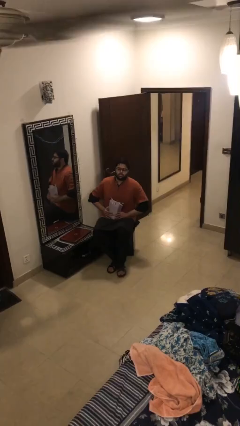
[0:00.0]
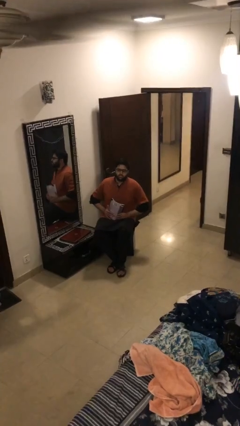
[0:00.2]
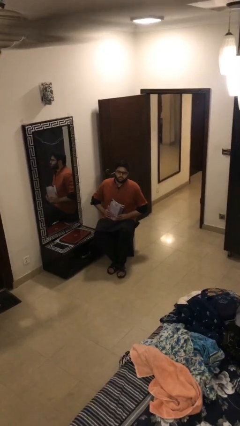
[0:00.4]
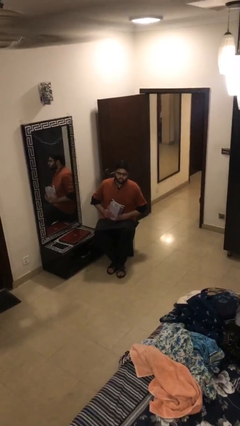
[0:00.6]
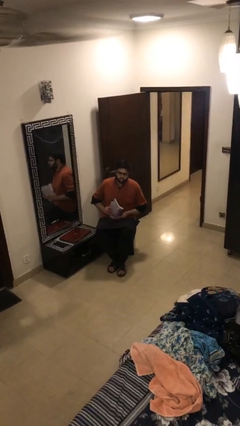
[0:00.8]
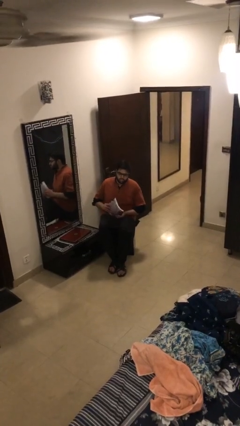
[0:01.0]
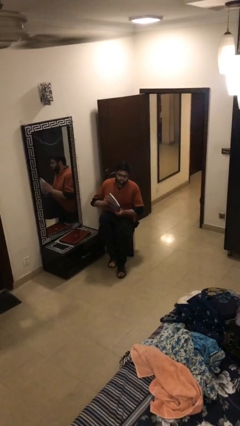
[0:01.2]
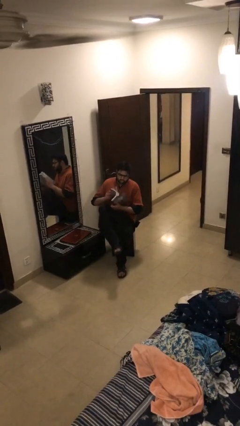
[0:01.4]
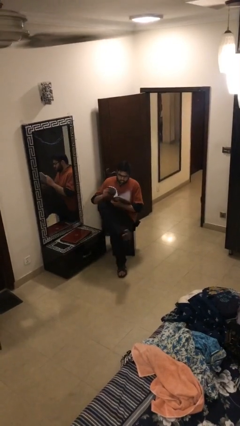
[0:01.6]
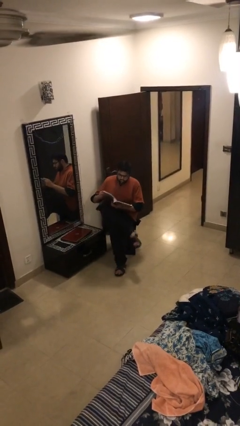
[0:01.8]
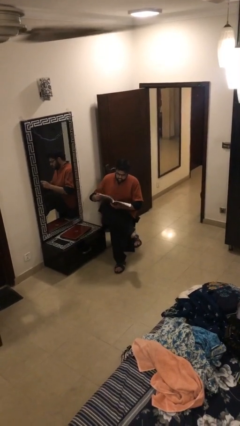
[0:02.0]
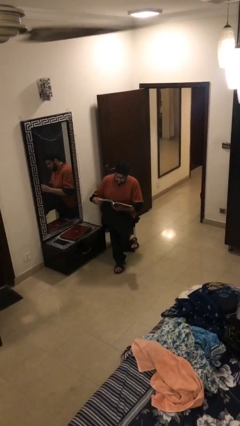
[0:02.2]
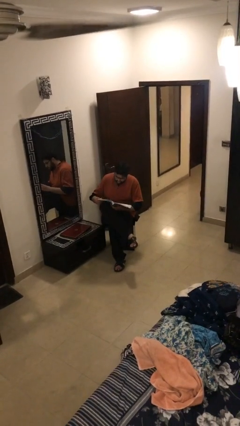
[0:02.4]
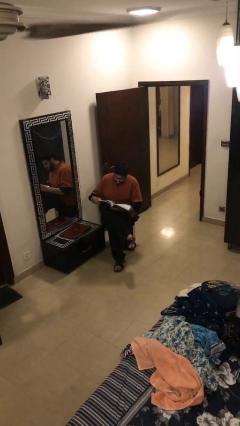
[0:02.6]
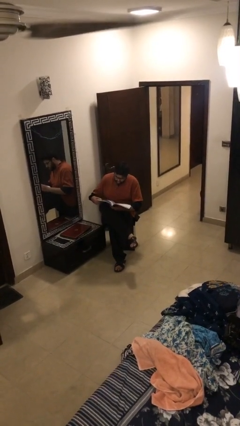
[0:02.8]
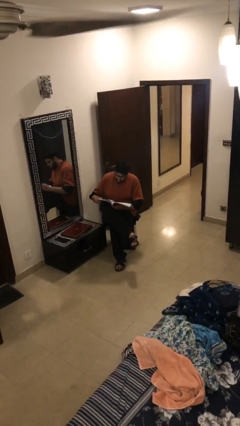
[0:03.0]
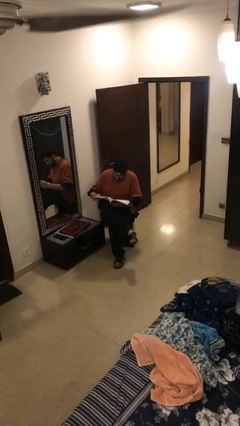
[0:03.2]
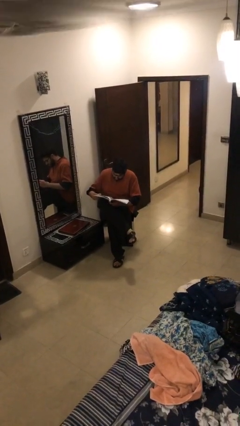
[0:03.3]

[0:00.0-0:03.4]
person reads document

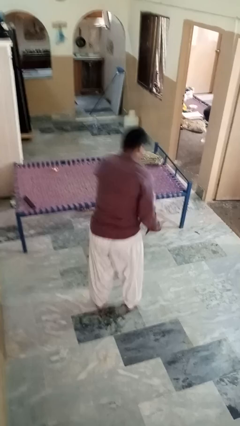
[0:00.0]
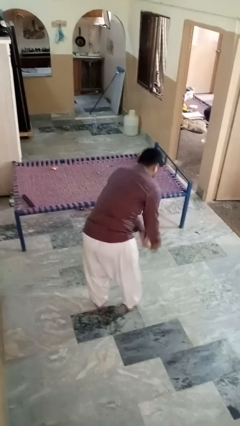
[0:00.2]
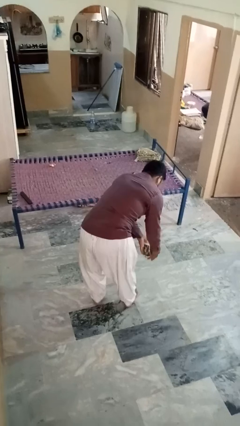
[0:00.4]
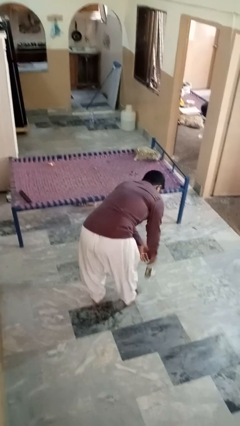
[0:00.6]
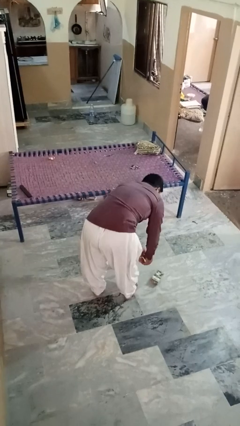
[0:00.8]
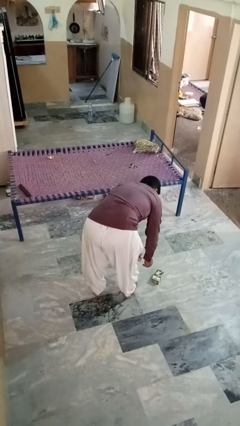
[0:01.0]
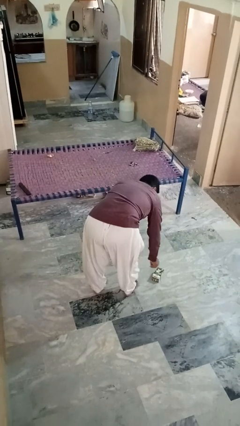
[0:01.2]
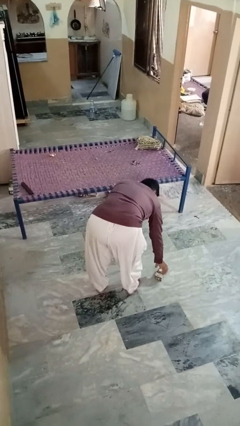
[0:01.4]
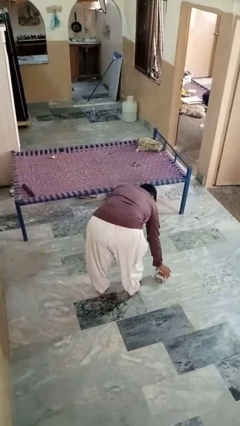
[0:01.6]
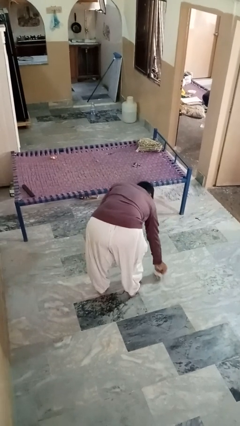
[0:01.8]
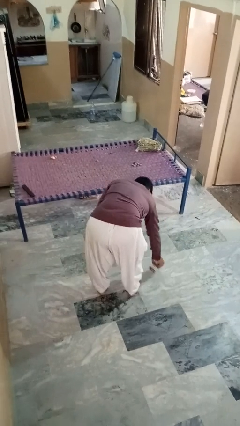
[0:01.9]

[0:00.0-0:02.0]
person catches dropped object

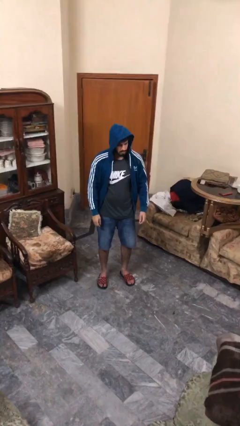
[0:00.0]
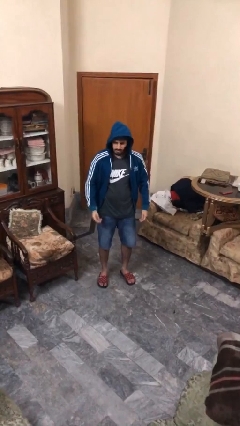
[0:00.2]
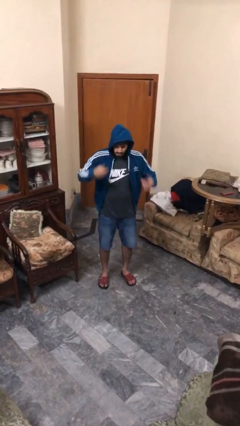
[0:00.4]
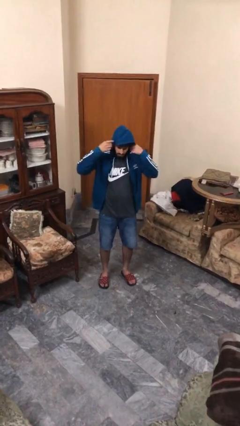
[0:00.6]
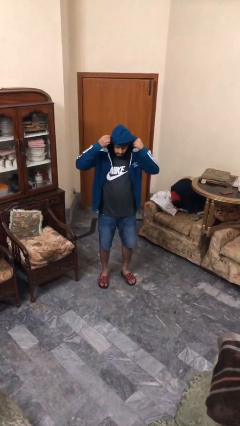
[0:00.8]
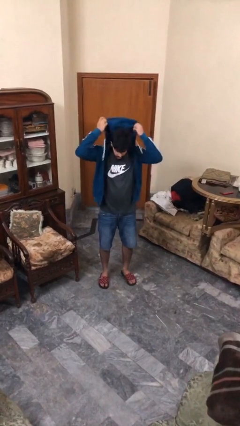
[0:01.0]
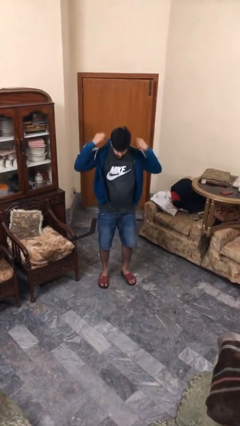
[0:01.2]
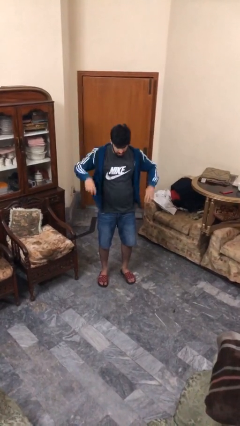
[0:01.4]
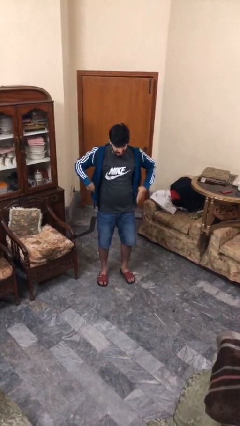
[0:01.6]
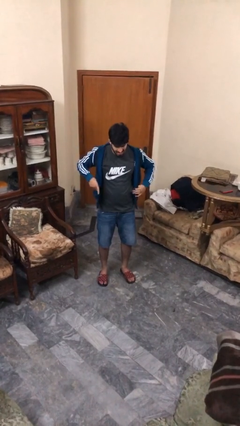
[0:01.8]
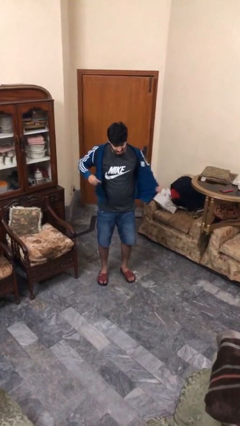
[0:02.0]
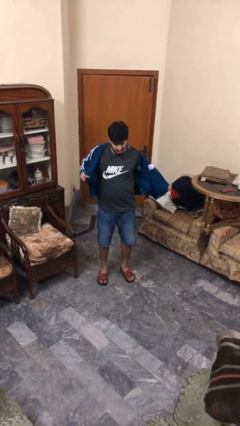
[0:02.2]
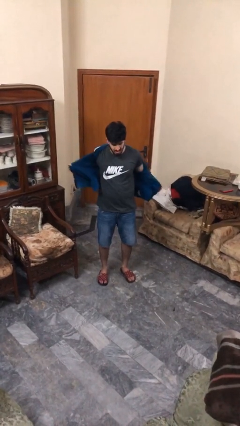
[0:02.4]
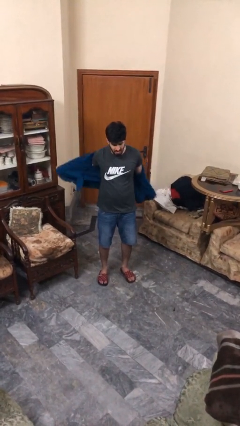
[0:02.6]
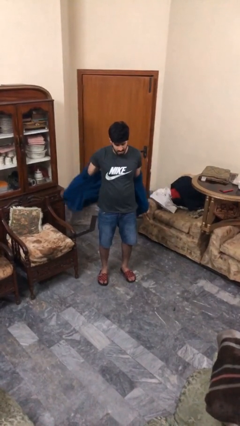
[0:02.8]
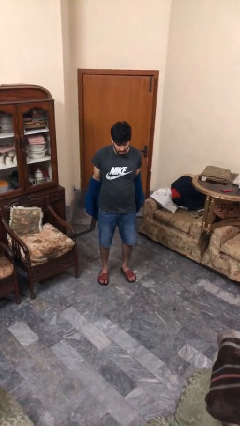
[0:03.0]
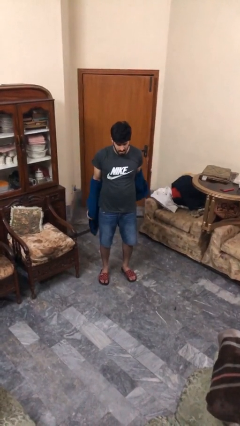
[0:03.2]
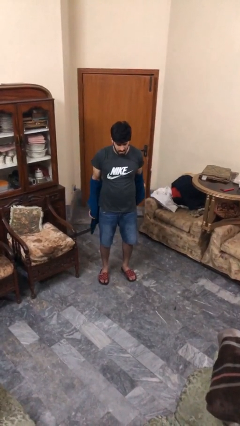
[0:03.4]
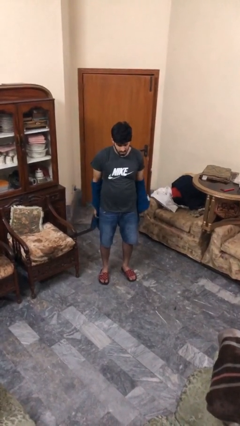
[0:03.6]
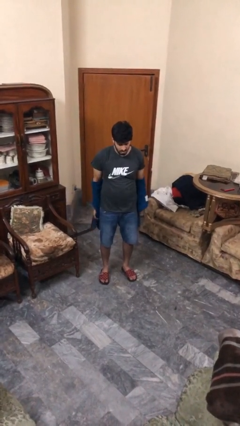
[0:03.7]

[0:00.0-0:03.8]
person takes off hoodie

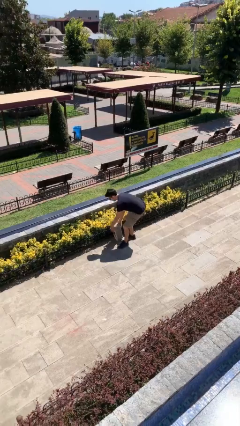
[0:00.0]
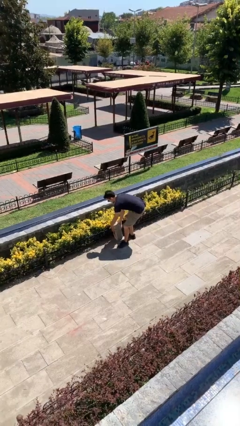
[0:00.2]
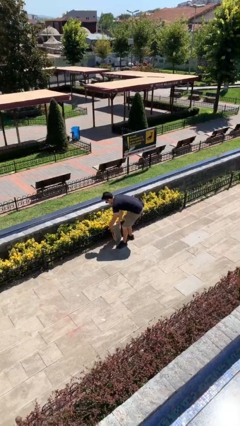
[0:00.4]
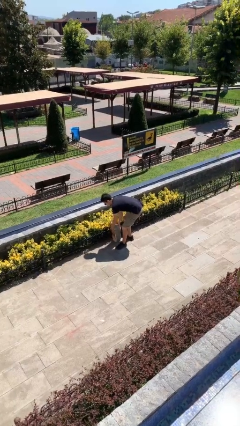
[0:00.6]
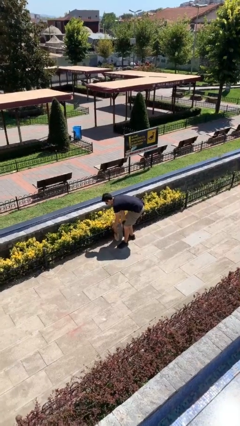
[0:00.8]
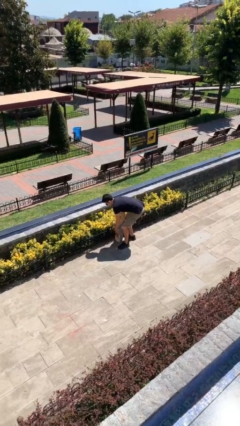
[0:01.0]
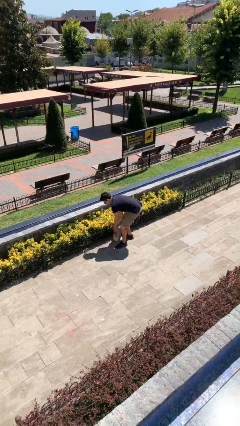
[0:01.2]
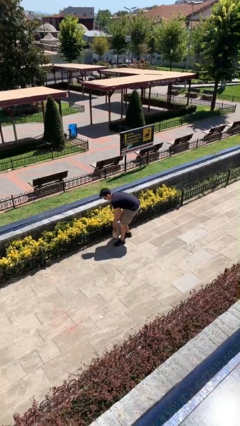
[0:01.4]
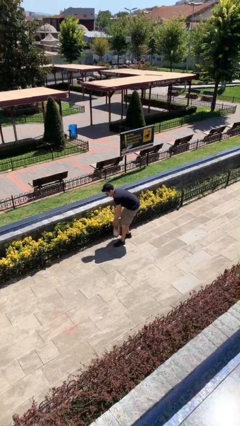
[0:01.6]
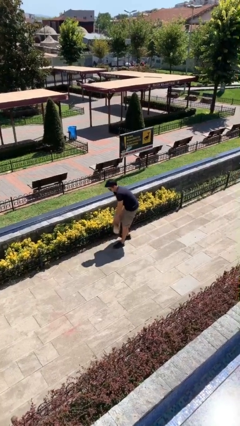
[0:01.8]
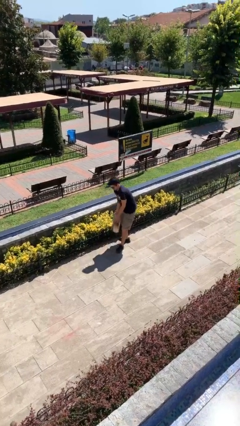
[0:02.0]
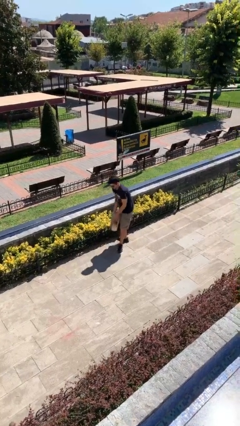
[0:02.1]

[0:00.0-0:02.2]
person picks up object from floor

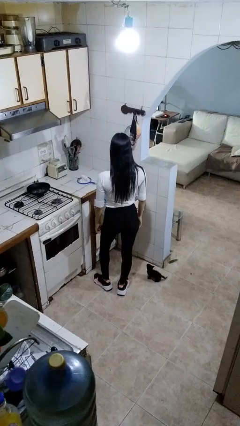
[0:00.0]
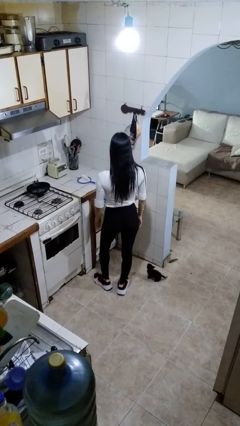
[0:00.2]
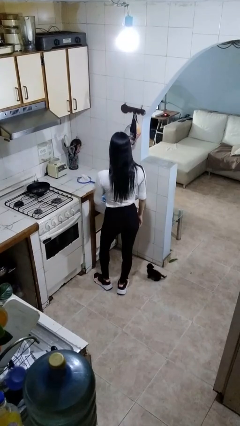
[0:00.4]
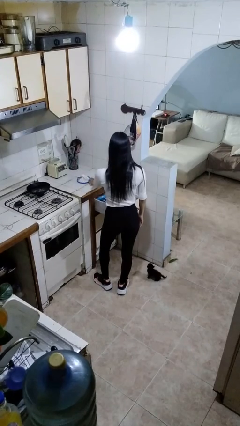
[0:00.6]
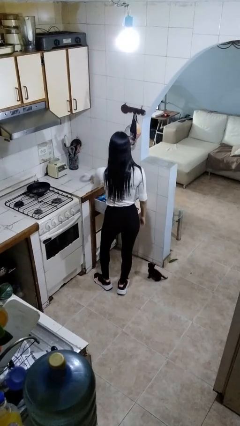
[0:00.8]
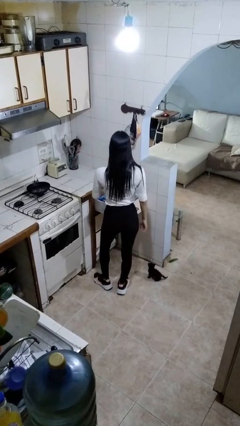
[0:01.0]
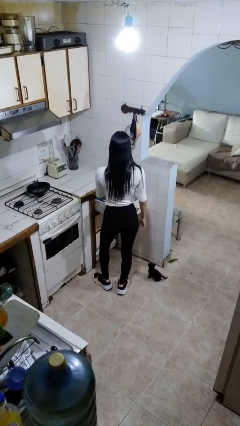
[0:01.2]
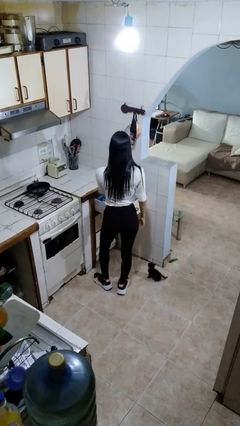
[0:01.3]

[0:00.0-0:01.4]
person puts object into kitchen drawer

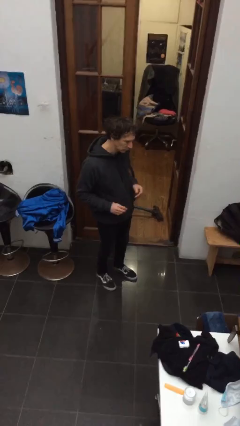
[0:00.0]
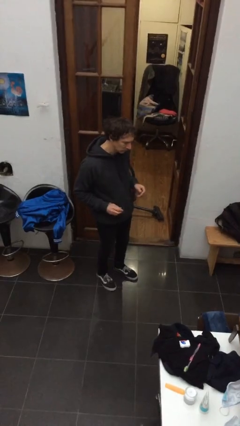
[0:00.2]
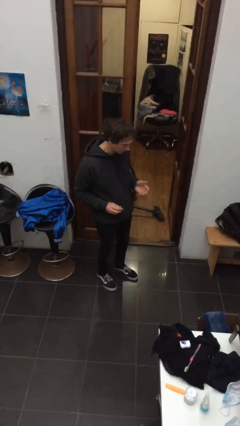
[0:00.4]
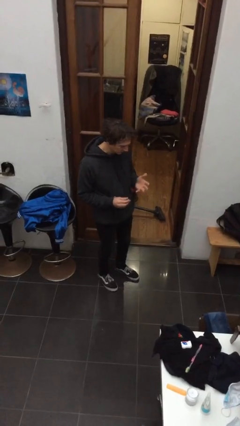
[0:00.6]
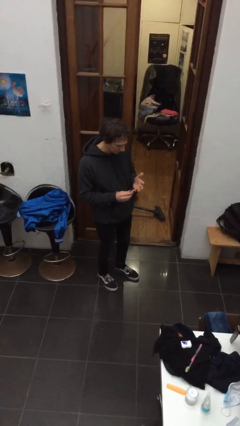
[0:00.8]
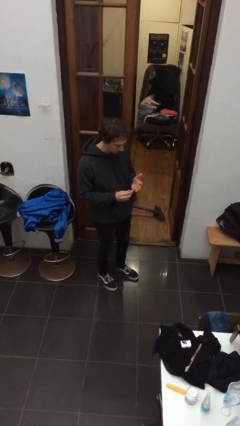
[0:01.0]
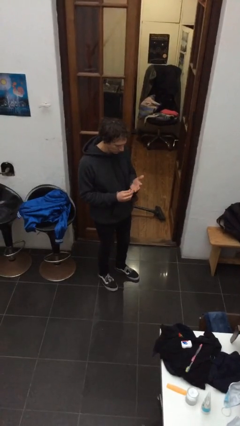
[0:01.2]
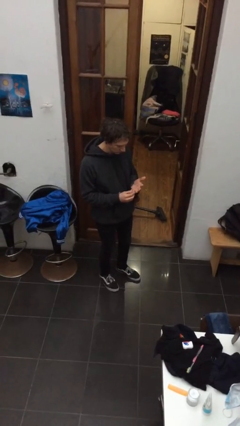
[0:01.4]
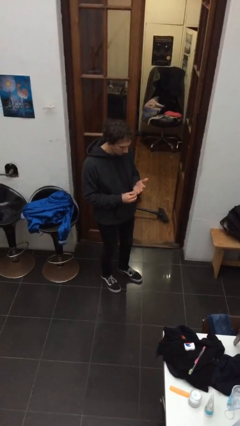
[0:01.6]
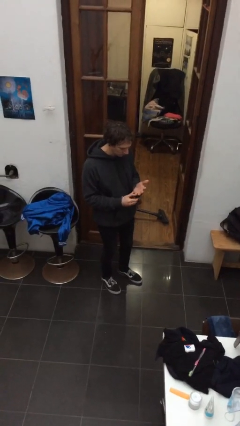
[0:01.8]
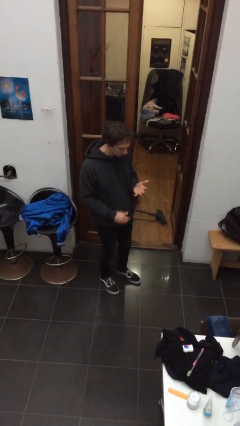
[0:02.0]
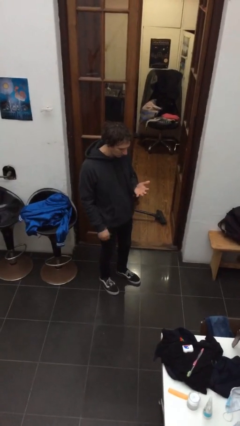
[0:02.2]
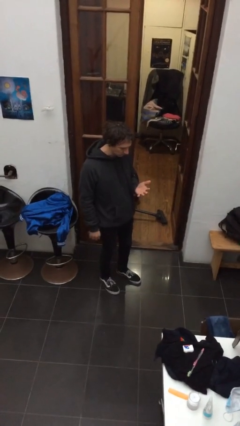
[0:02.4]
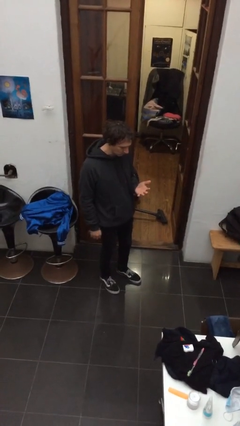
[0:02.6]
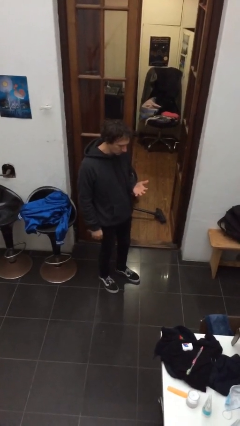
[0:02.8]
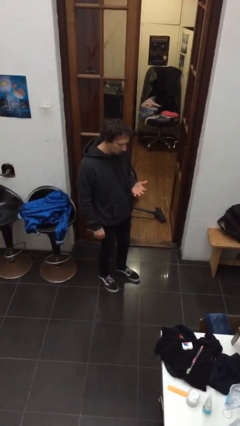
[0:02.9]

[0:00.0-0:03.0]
person puts on ring

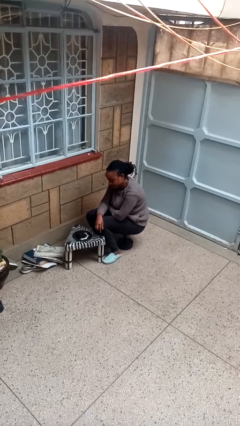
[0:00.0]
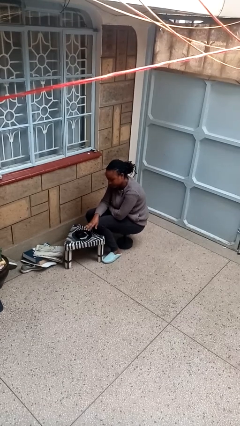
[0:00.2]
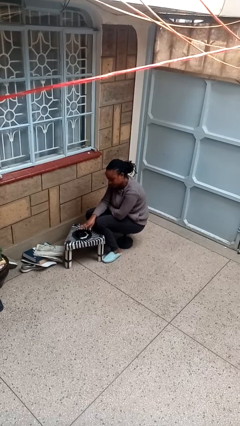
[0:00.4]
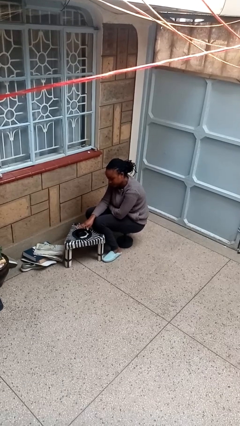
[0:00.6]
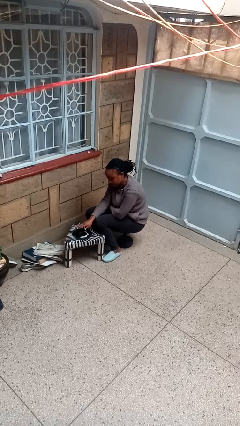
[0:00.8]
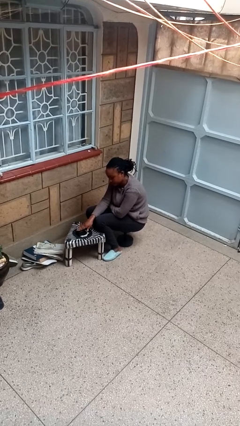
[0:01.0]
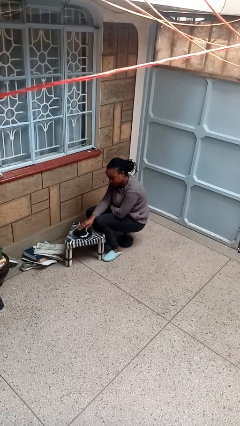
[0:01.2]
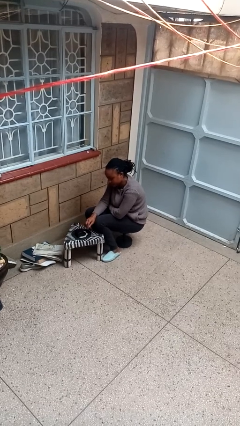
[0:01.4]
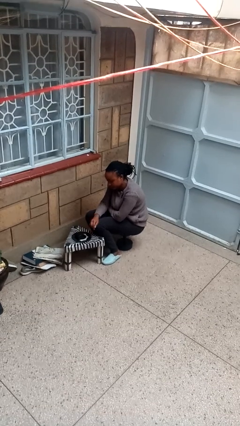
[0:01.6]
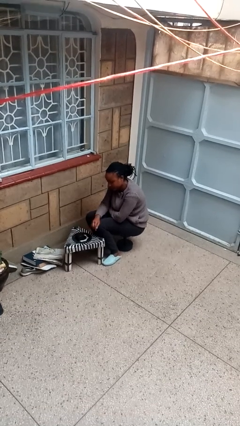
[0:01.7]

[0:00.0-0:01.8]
person taps object with finger
